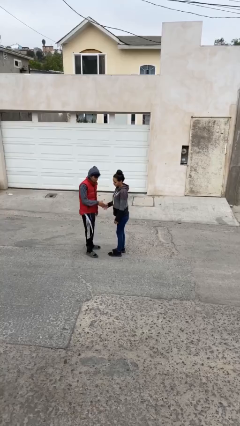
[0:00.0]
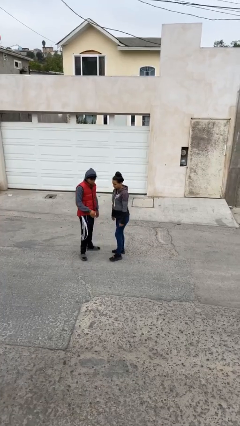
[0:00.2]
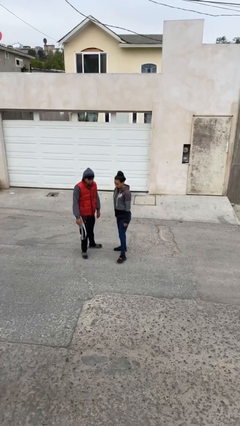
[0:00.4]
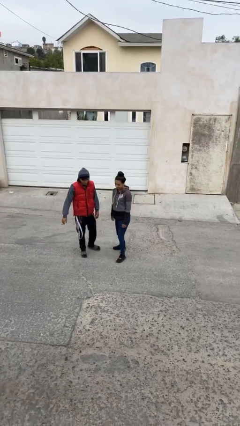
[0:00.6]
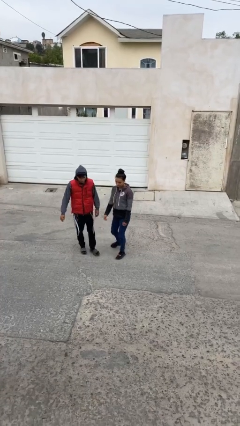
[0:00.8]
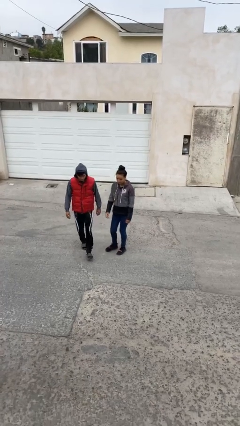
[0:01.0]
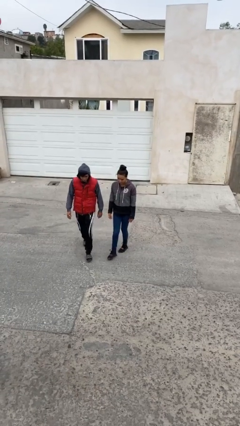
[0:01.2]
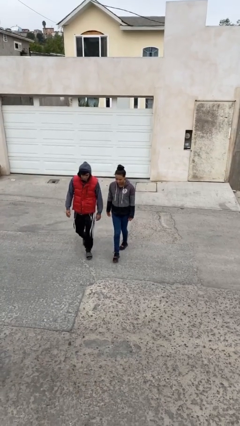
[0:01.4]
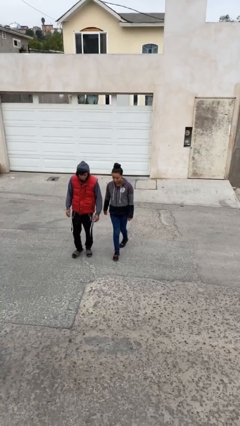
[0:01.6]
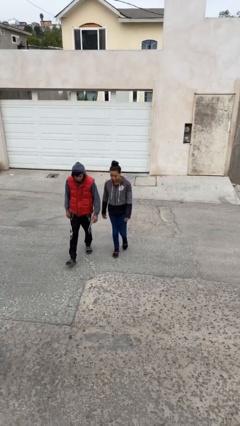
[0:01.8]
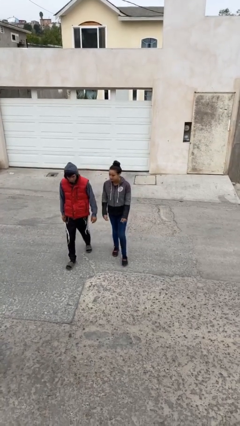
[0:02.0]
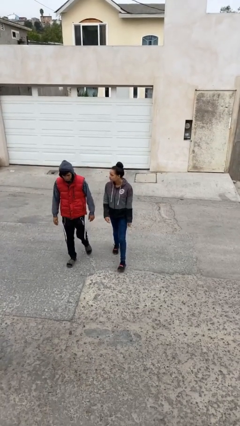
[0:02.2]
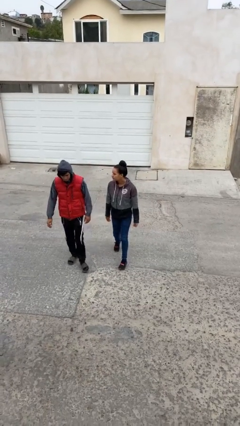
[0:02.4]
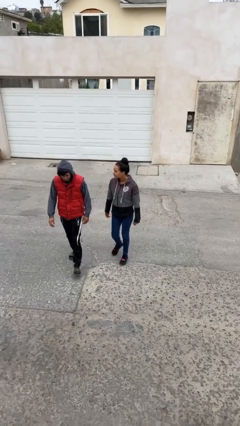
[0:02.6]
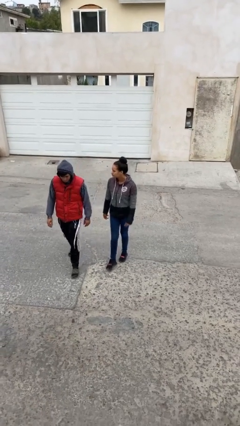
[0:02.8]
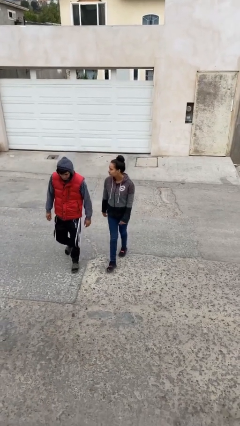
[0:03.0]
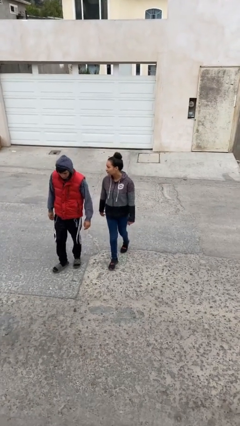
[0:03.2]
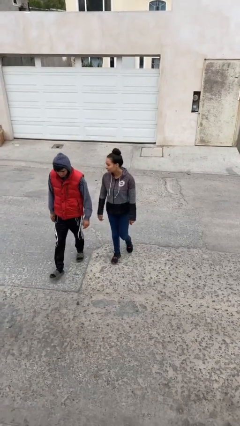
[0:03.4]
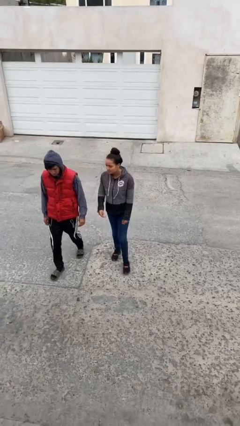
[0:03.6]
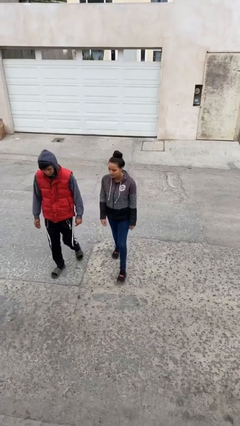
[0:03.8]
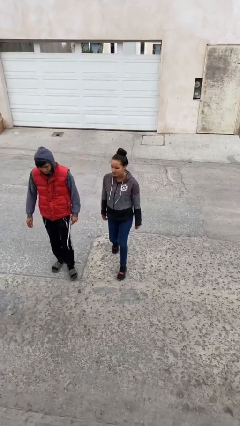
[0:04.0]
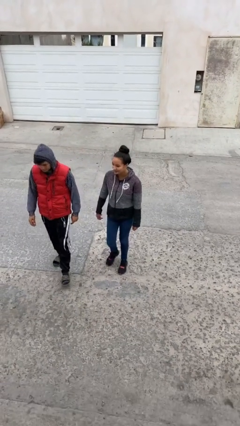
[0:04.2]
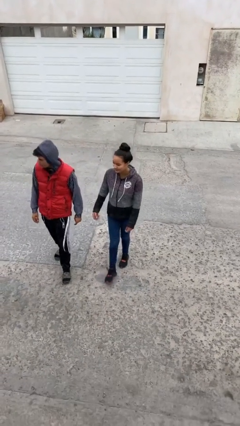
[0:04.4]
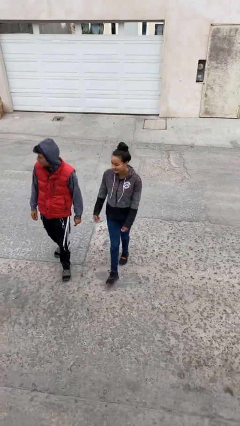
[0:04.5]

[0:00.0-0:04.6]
person talks to person

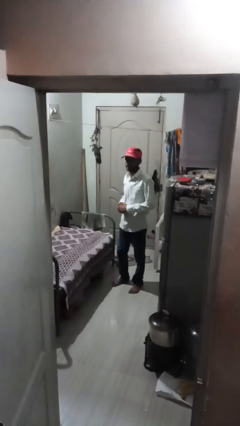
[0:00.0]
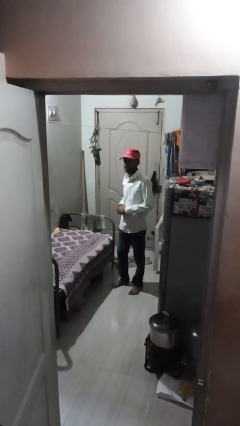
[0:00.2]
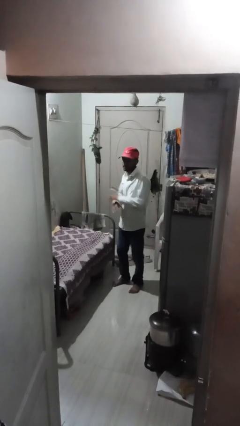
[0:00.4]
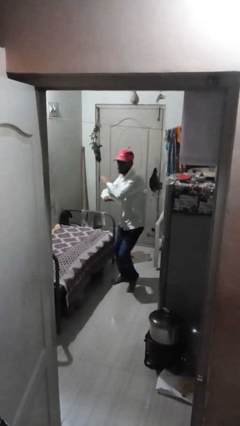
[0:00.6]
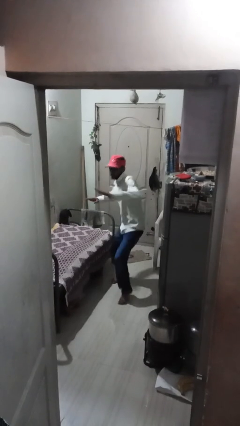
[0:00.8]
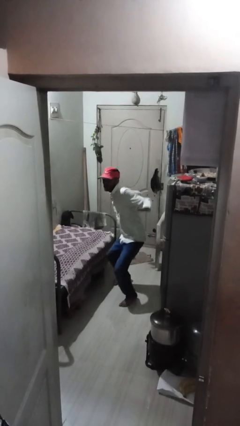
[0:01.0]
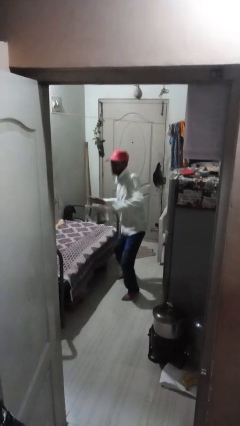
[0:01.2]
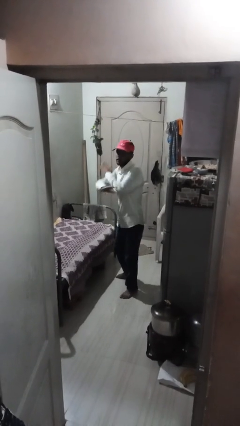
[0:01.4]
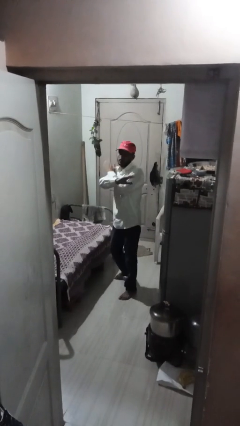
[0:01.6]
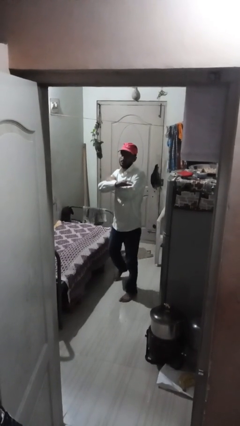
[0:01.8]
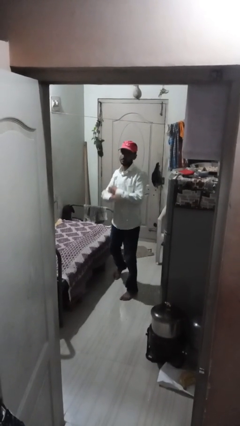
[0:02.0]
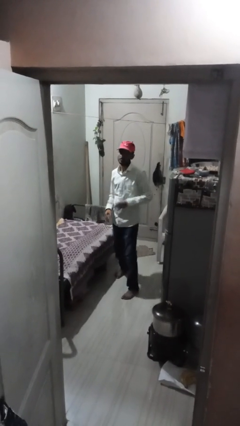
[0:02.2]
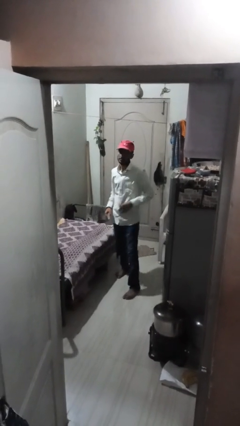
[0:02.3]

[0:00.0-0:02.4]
person karate chop

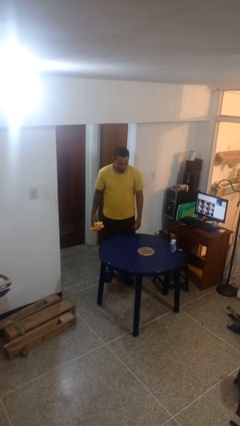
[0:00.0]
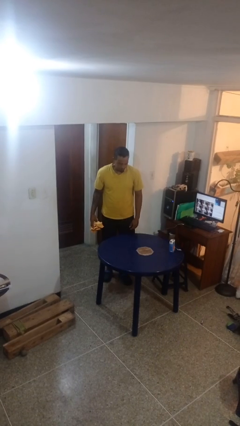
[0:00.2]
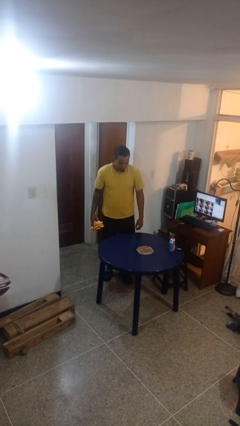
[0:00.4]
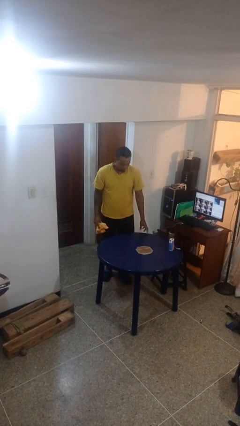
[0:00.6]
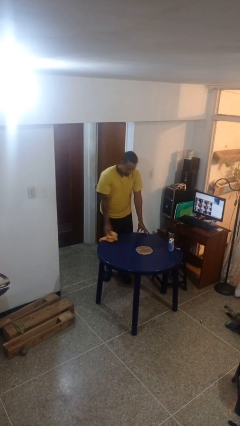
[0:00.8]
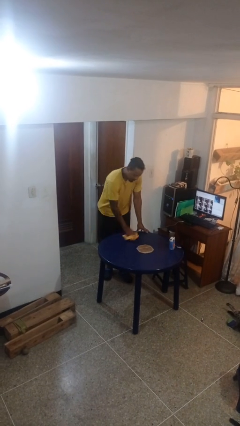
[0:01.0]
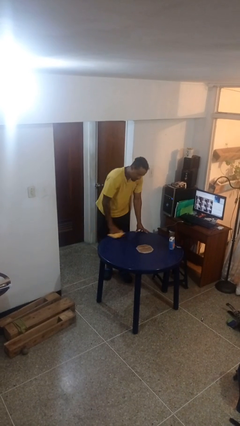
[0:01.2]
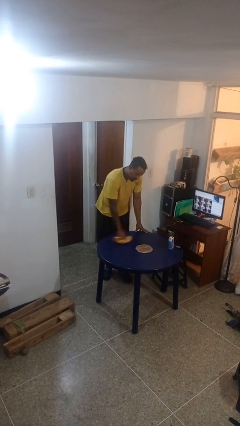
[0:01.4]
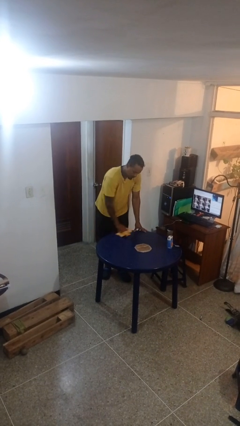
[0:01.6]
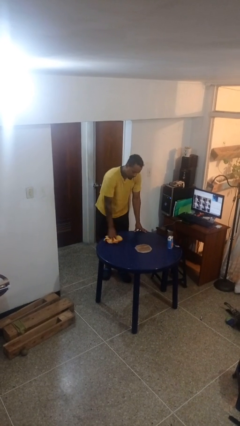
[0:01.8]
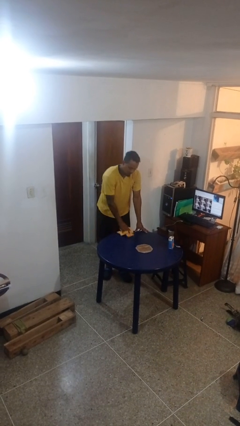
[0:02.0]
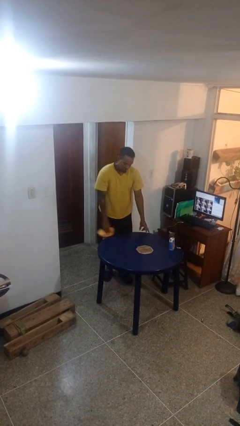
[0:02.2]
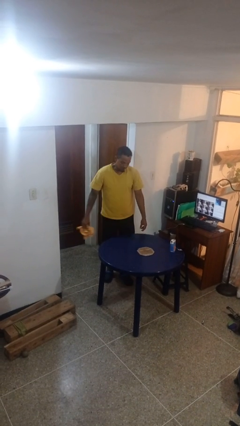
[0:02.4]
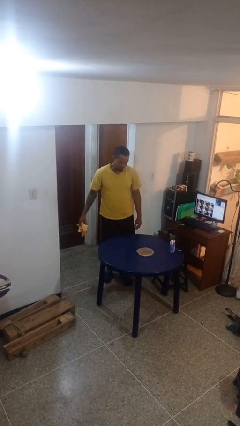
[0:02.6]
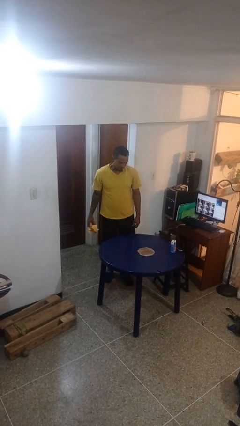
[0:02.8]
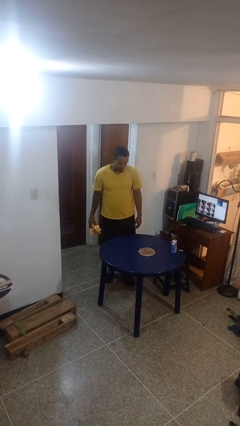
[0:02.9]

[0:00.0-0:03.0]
person cleans table with rag

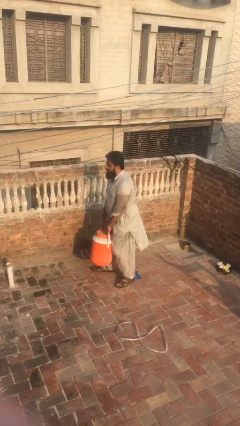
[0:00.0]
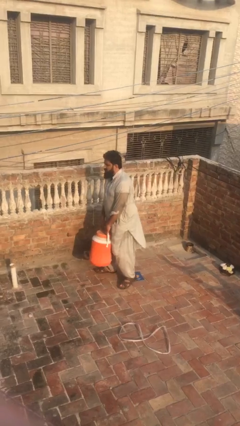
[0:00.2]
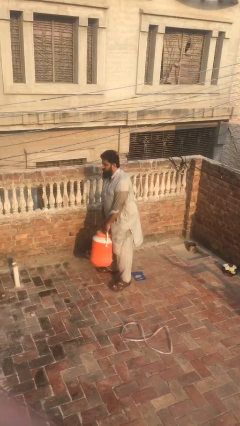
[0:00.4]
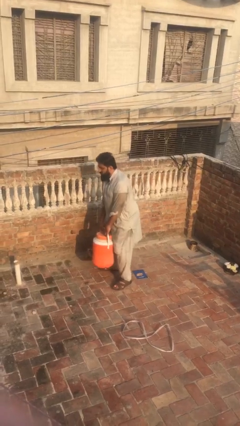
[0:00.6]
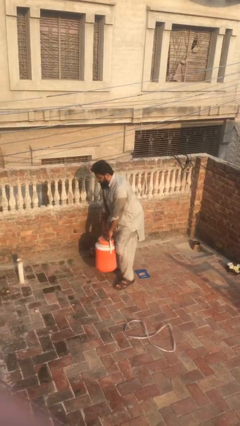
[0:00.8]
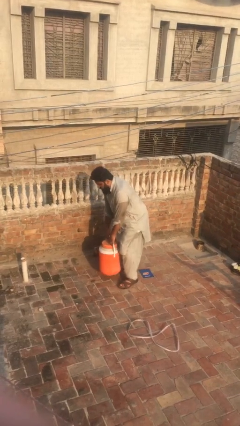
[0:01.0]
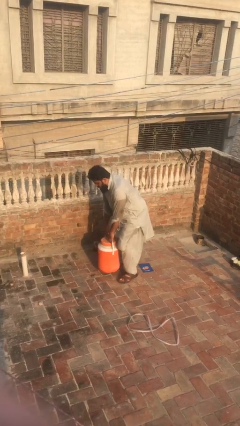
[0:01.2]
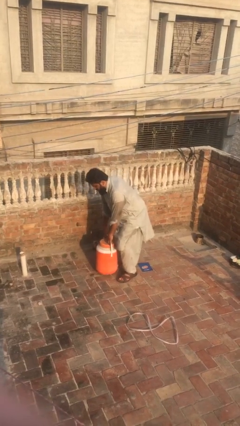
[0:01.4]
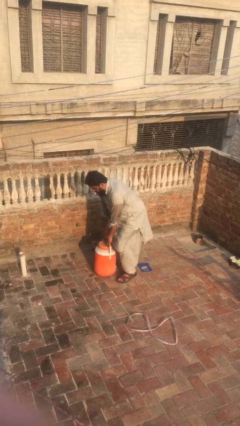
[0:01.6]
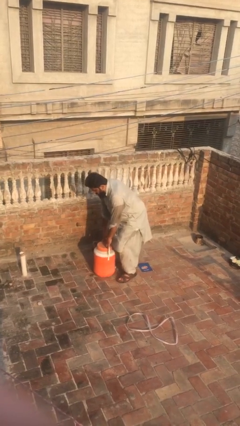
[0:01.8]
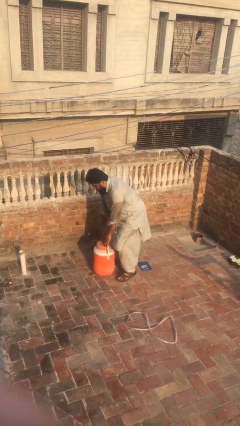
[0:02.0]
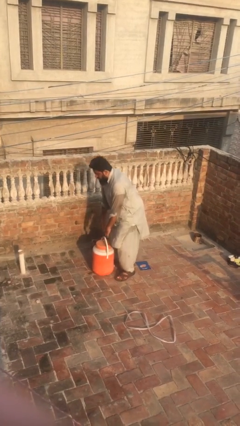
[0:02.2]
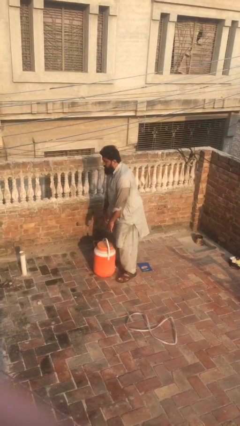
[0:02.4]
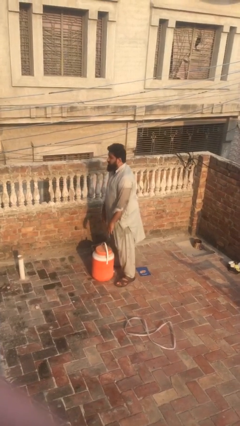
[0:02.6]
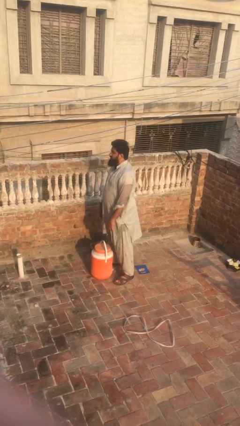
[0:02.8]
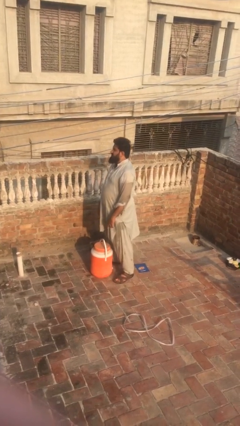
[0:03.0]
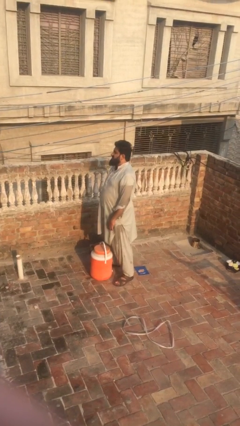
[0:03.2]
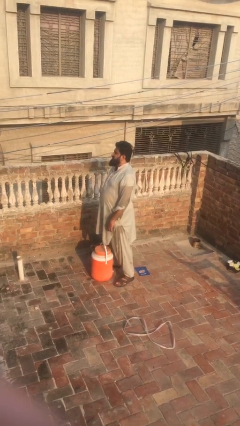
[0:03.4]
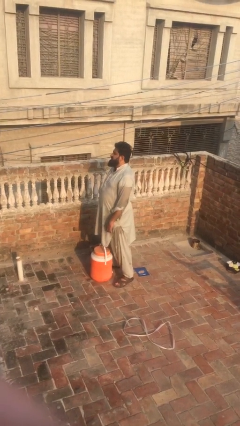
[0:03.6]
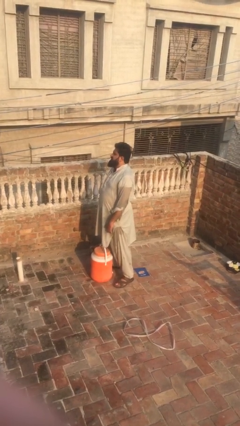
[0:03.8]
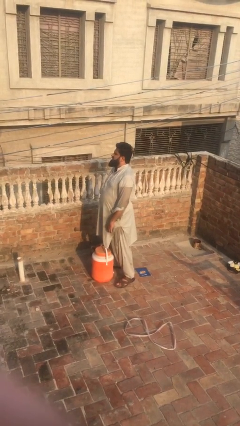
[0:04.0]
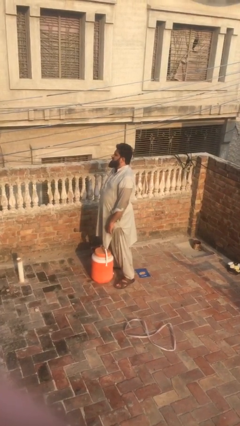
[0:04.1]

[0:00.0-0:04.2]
person puts down object on floor

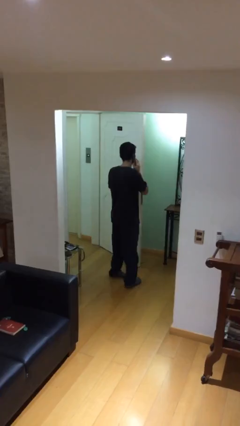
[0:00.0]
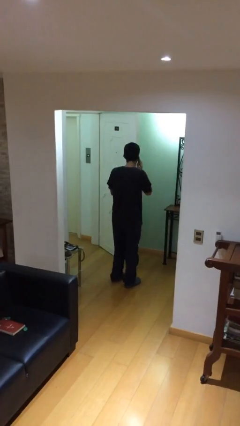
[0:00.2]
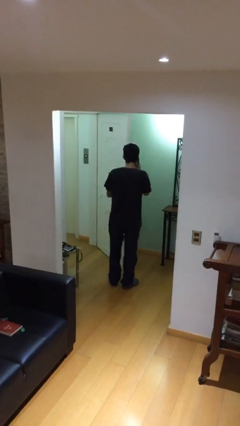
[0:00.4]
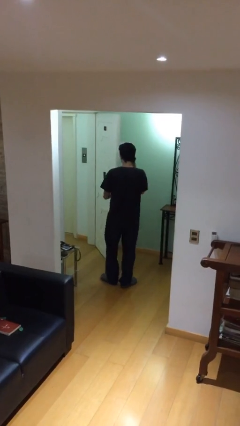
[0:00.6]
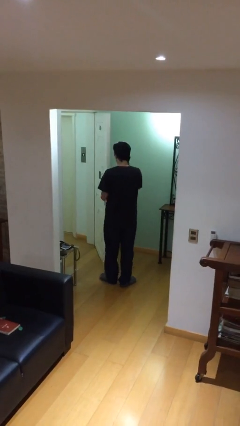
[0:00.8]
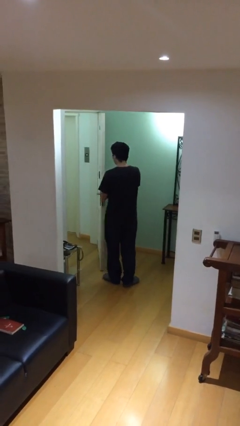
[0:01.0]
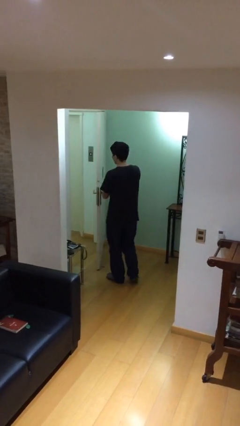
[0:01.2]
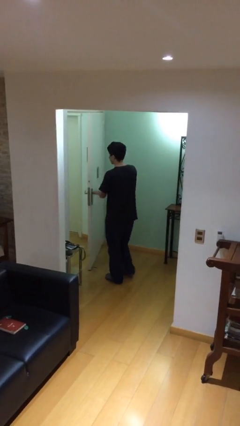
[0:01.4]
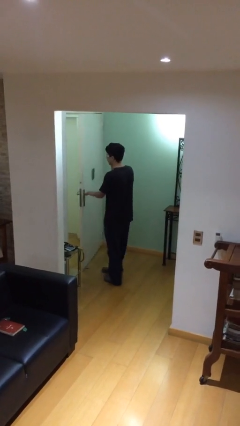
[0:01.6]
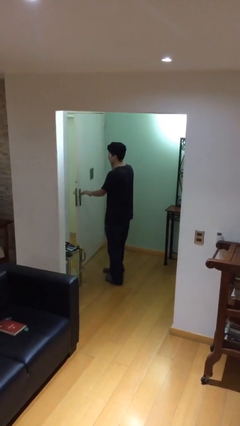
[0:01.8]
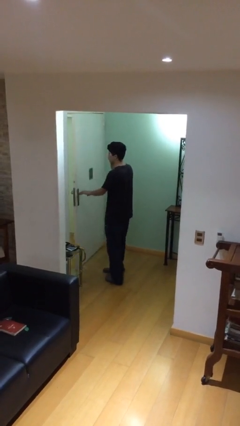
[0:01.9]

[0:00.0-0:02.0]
person closes facility door

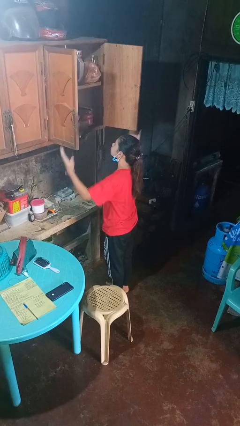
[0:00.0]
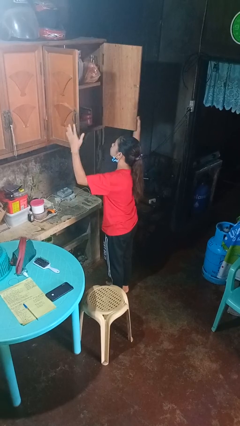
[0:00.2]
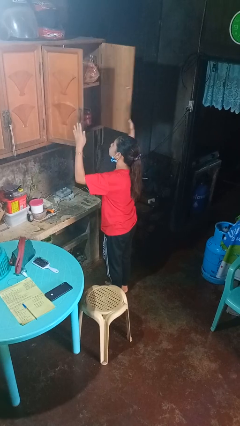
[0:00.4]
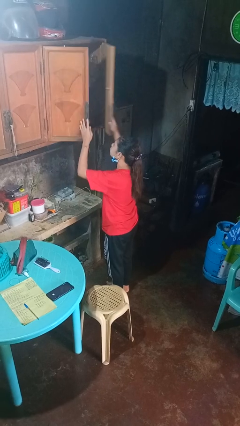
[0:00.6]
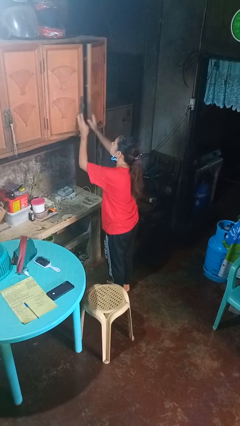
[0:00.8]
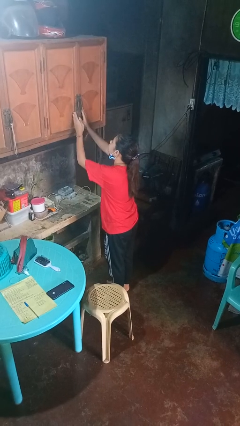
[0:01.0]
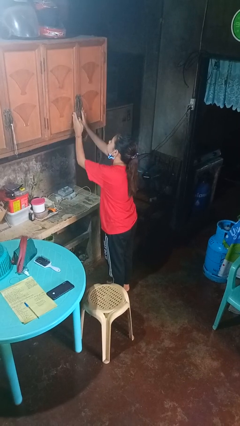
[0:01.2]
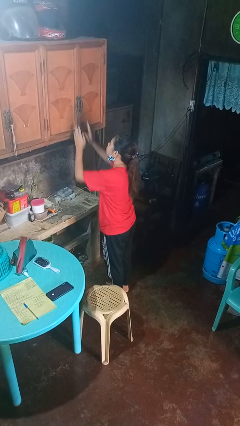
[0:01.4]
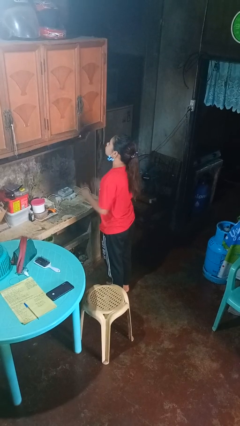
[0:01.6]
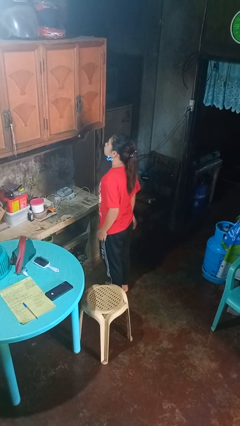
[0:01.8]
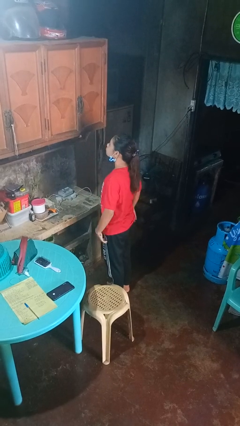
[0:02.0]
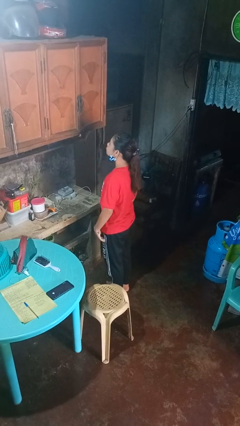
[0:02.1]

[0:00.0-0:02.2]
person closes cabinet
